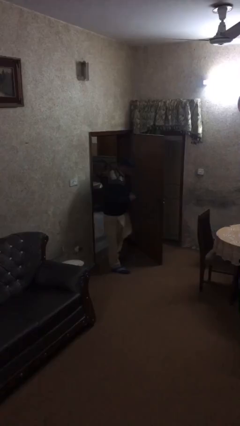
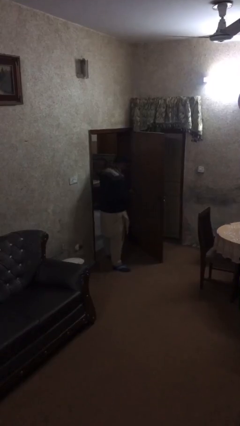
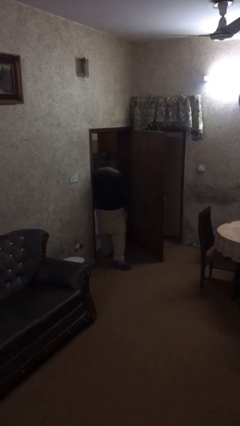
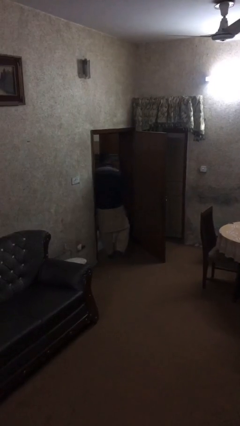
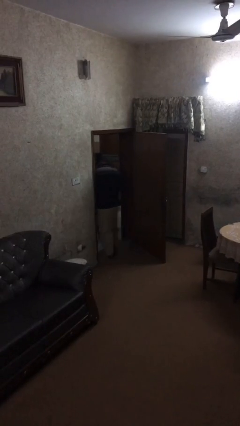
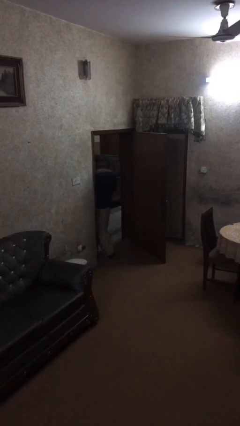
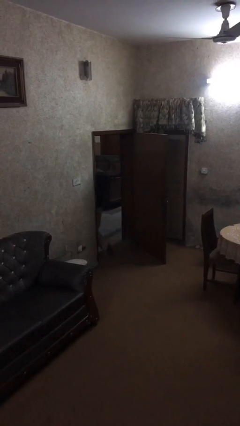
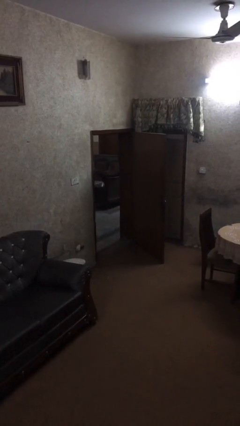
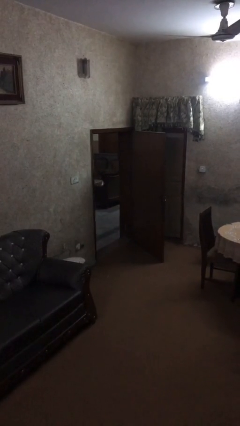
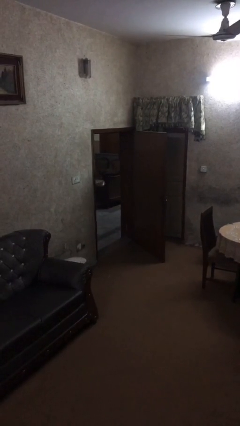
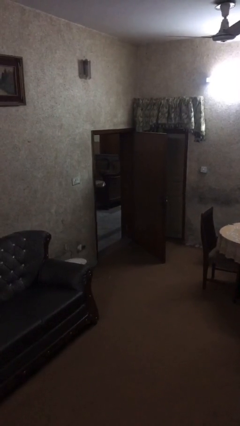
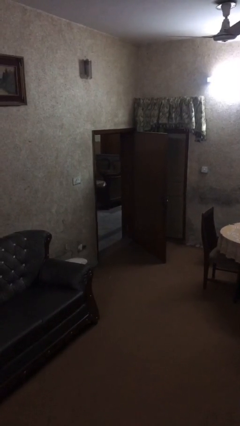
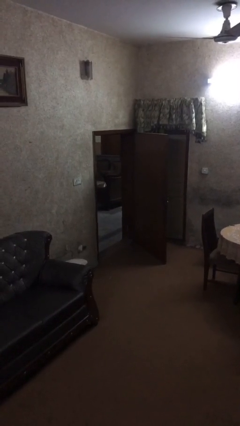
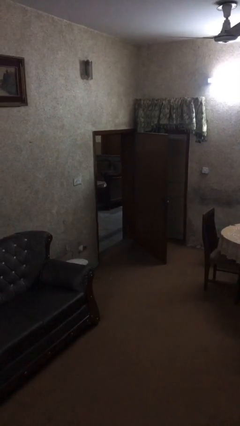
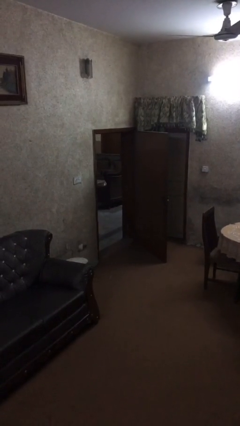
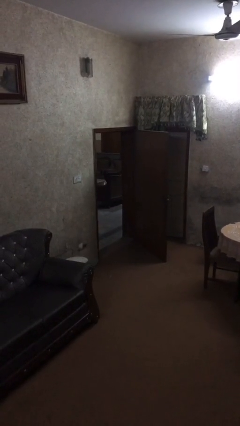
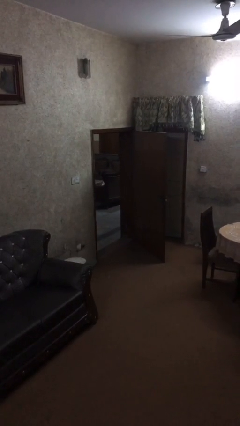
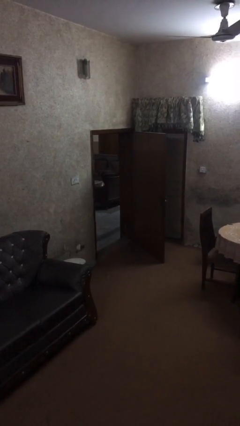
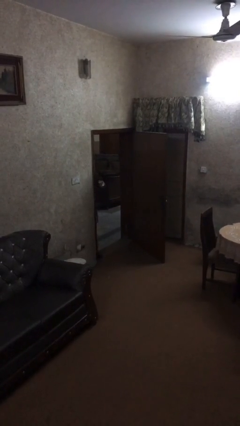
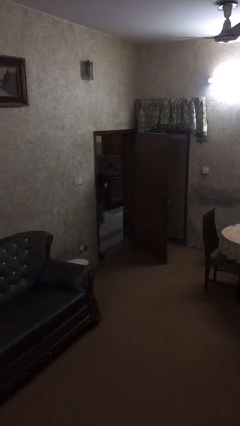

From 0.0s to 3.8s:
person exits scene through structure

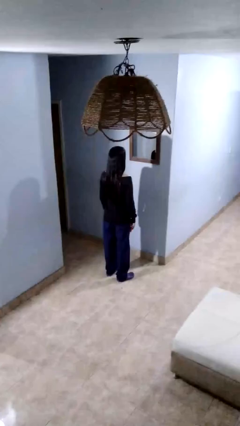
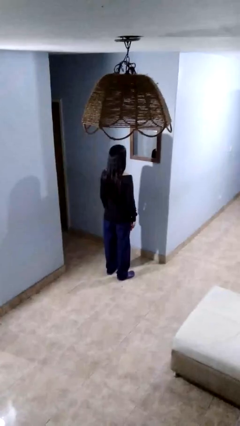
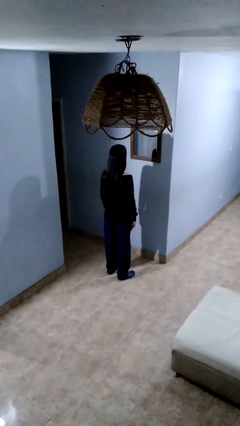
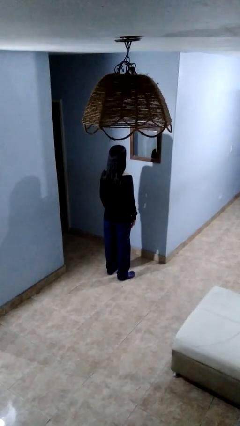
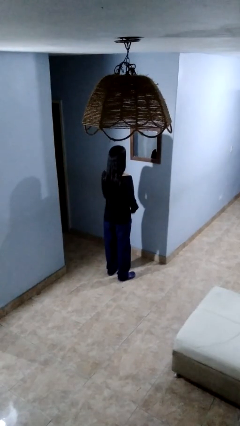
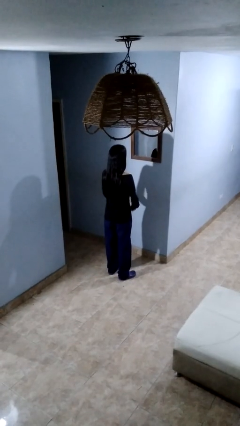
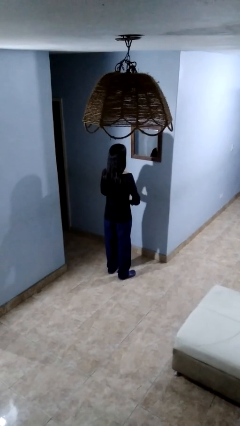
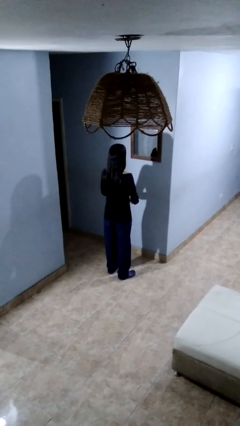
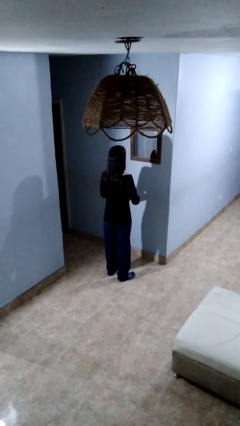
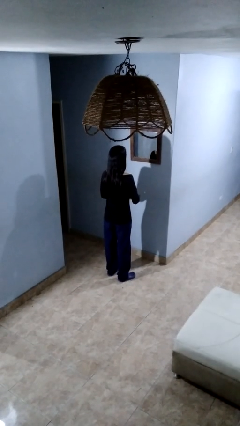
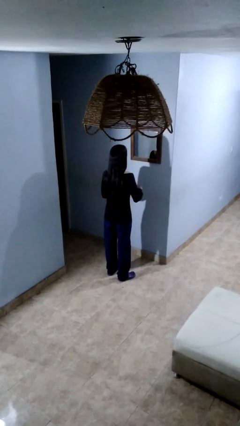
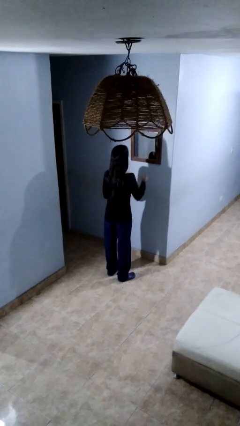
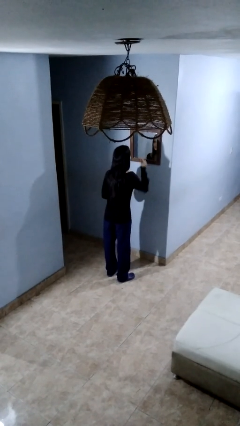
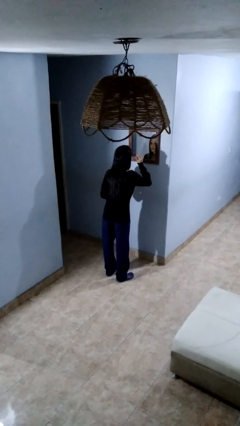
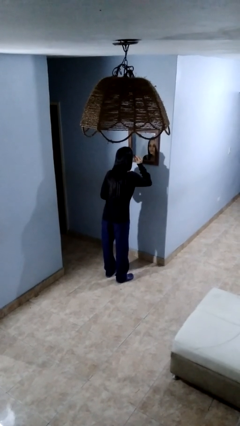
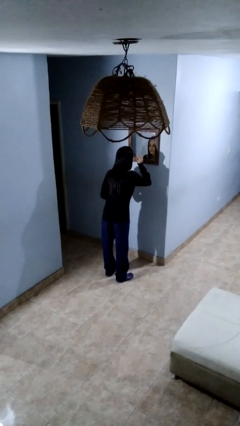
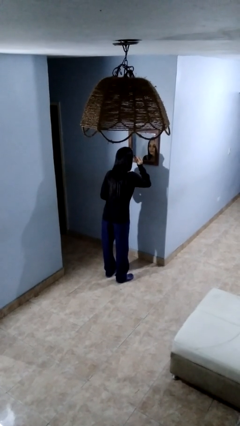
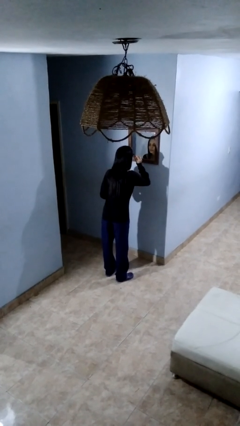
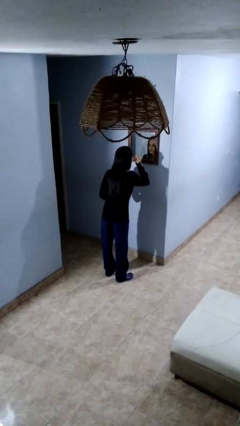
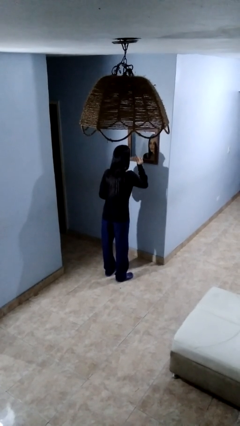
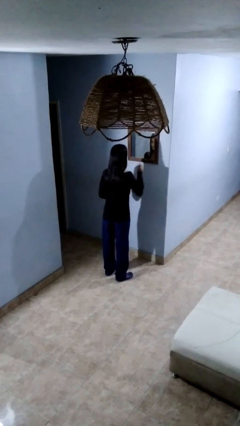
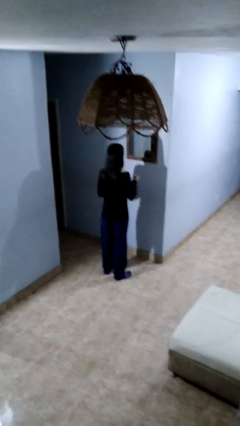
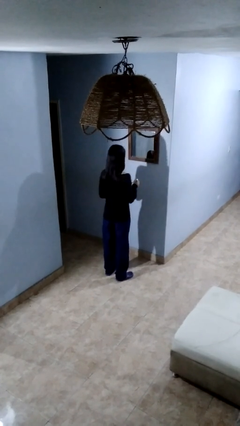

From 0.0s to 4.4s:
person applies eye makeup

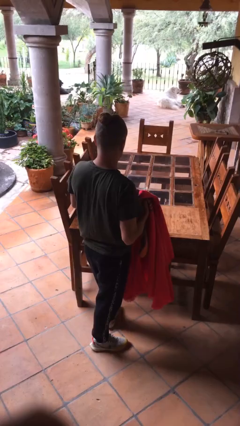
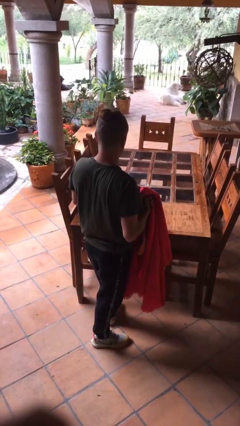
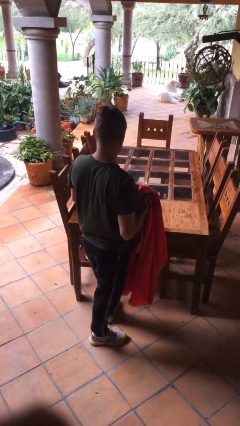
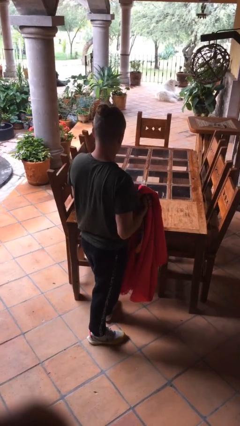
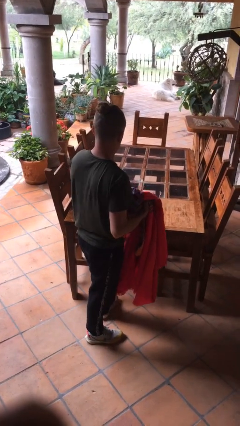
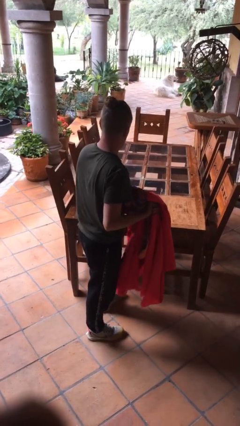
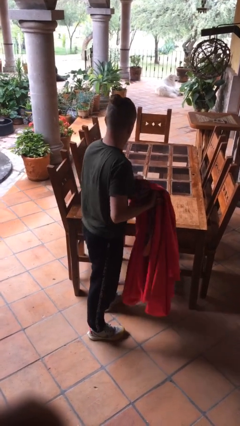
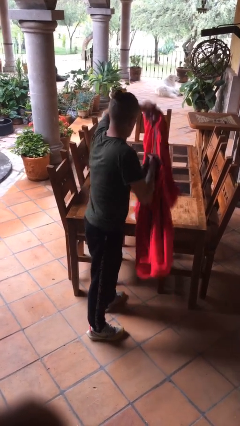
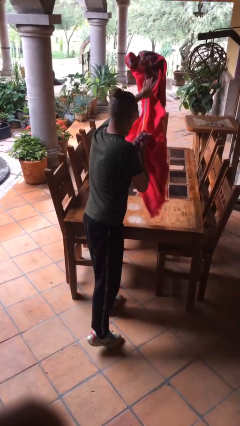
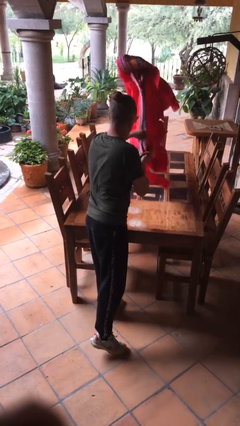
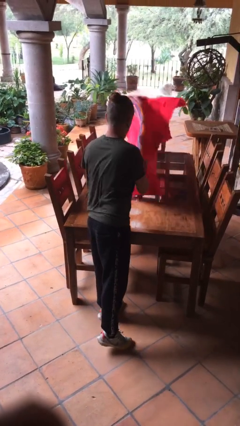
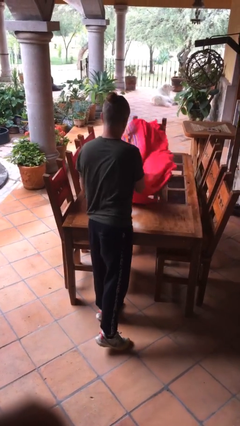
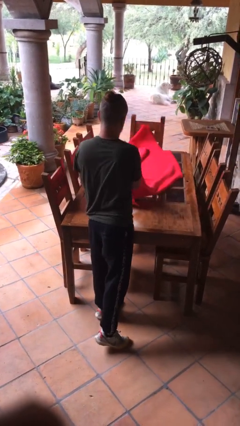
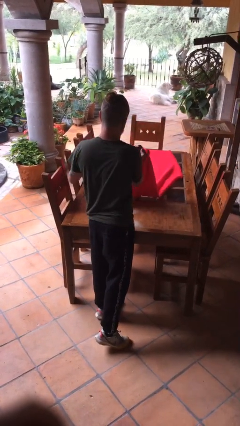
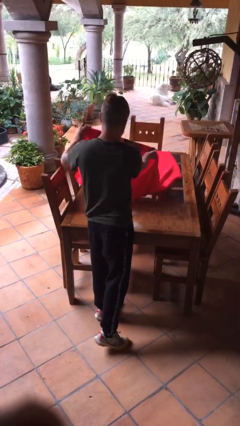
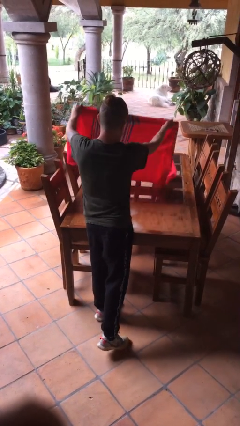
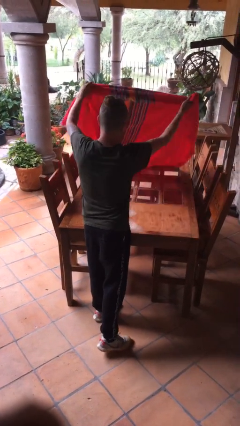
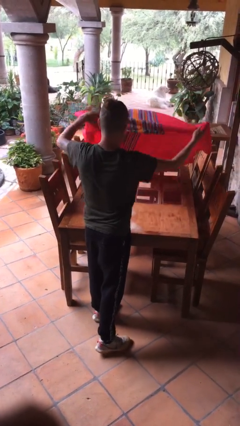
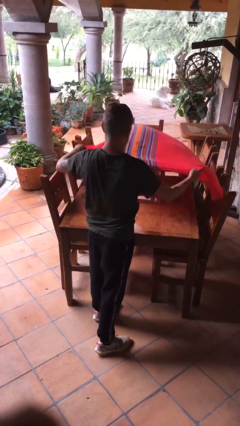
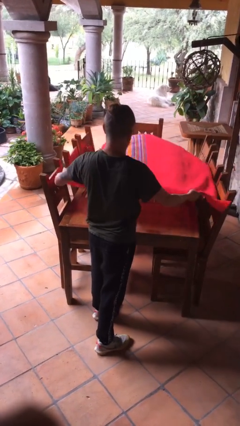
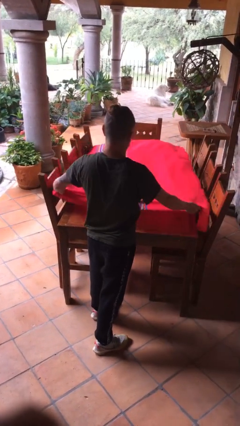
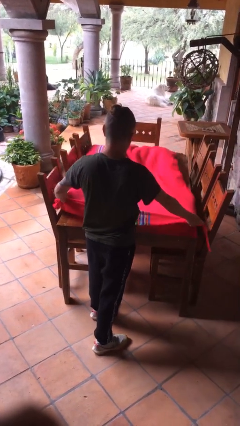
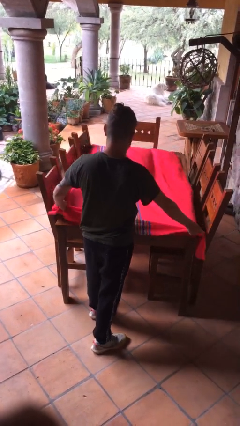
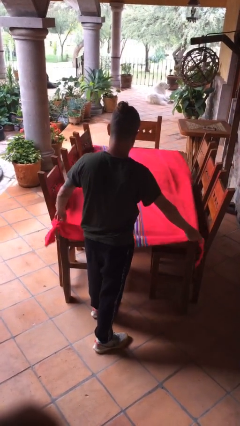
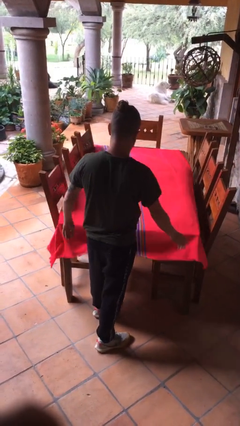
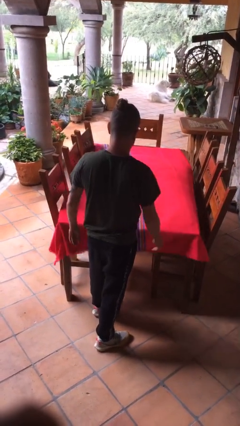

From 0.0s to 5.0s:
person spreads tablecloth

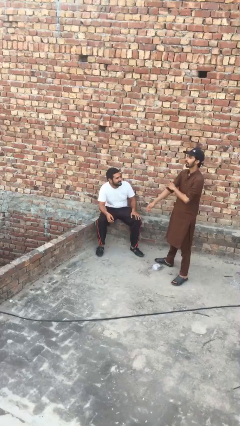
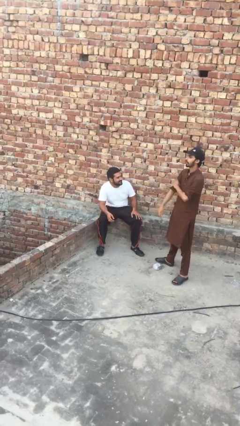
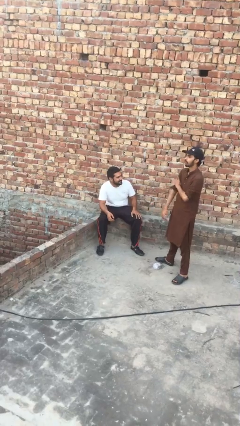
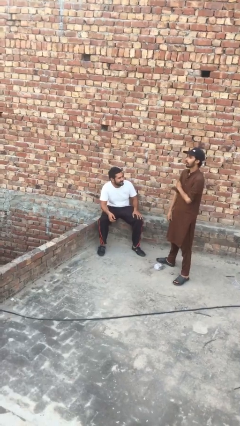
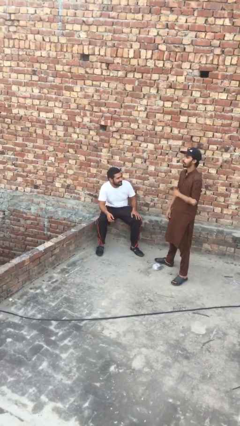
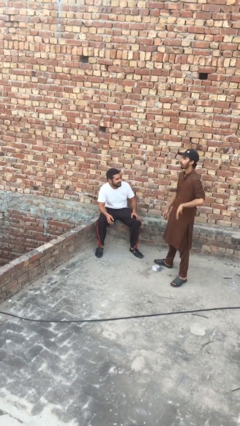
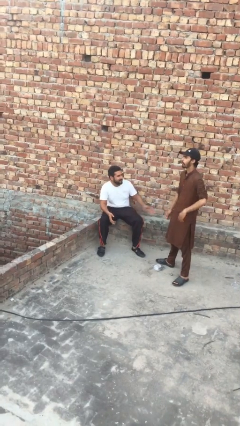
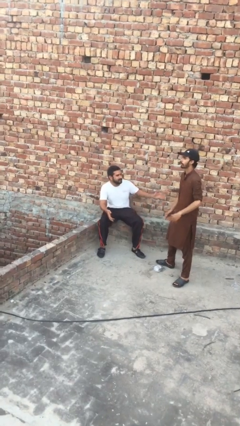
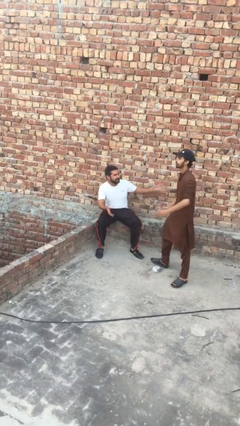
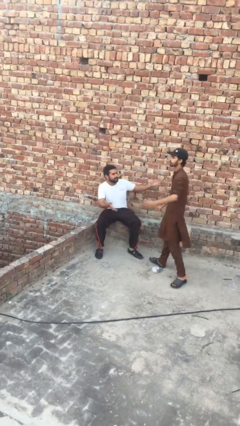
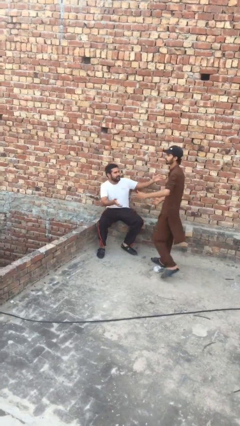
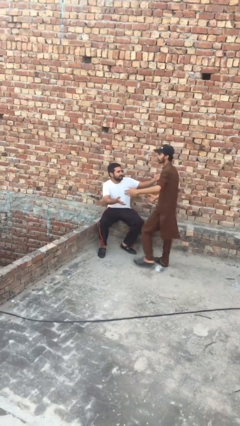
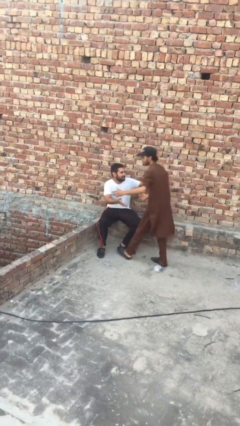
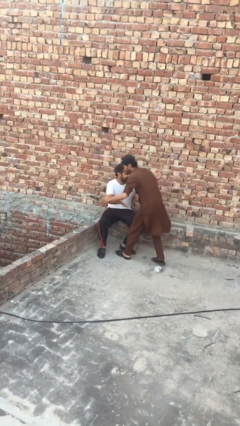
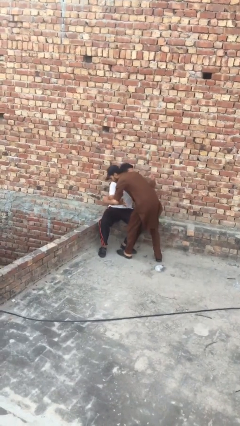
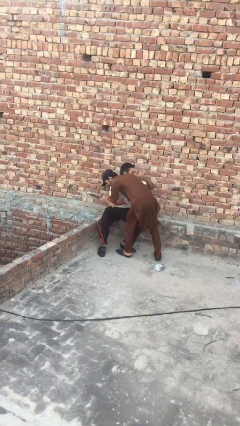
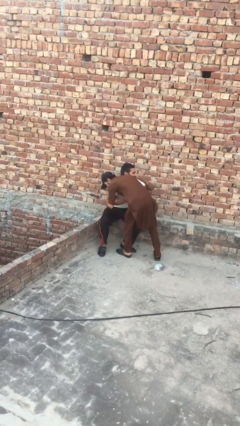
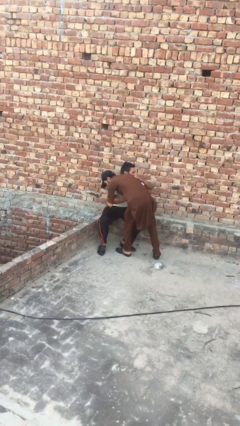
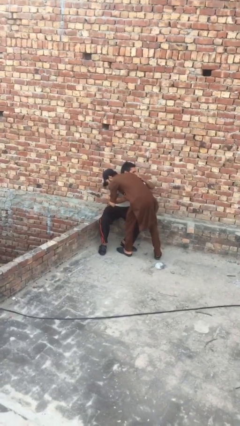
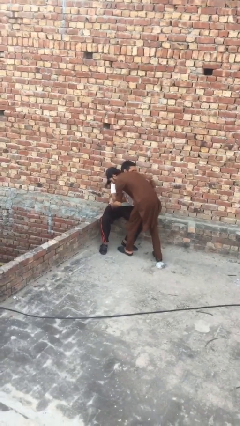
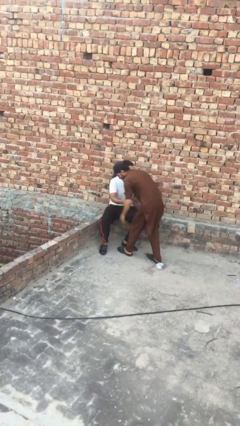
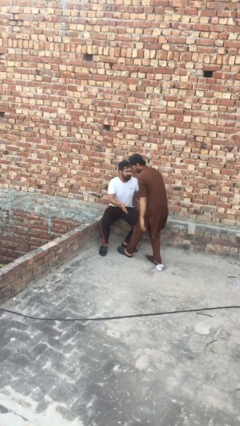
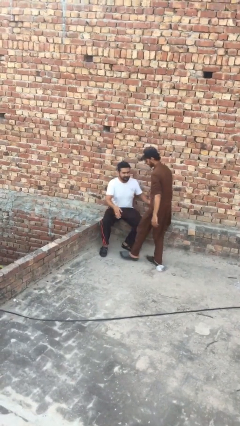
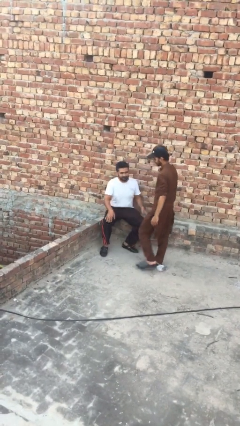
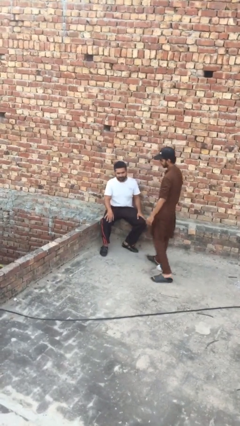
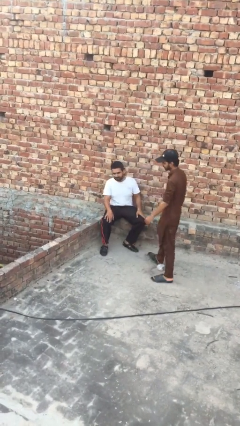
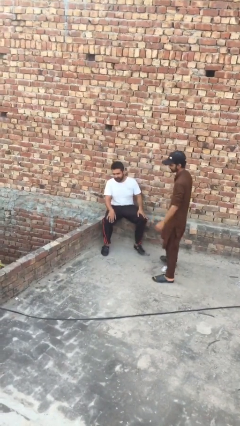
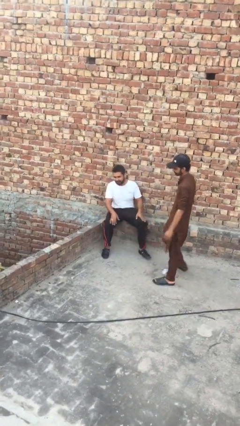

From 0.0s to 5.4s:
person embraces person
